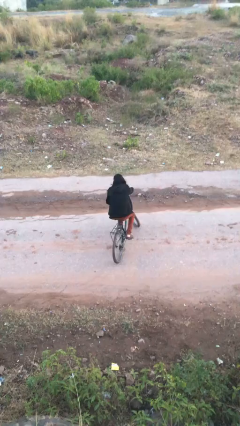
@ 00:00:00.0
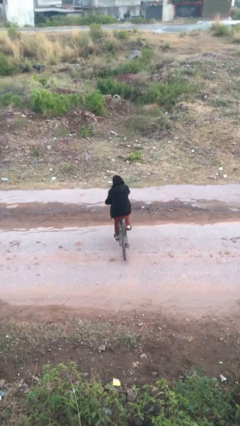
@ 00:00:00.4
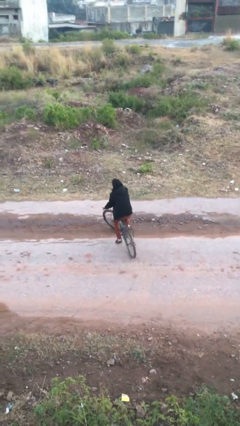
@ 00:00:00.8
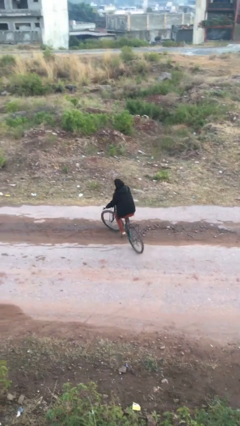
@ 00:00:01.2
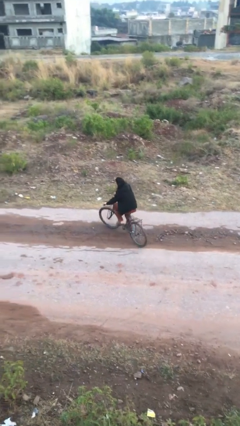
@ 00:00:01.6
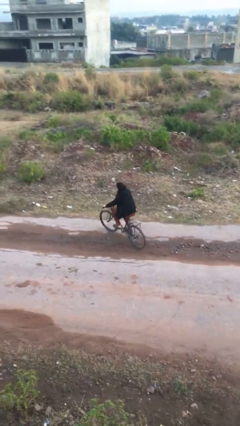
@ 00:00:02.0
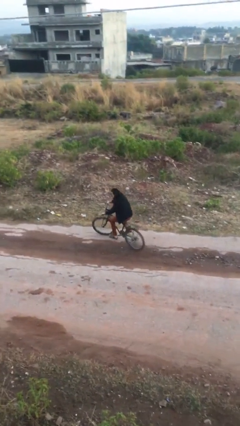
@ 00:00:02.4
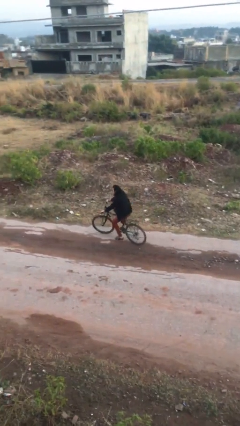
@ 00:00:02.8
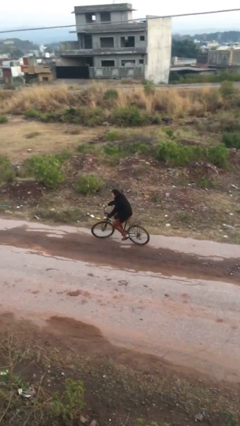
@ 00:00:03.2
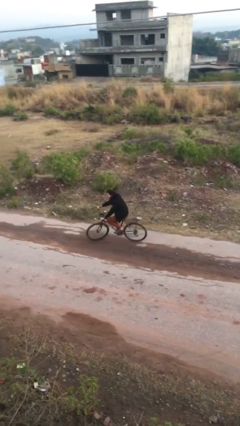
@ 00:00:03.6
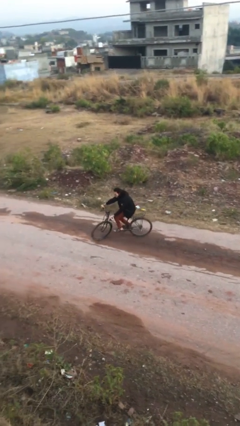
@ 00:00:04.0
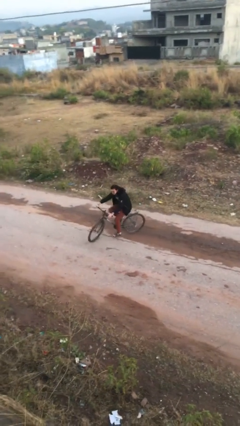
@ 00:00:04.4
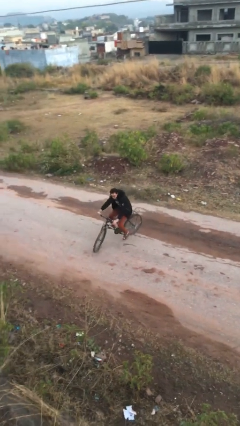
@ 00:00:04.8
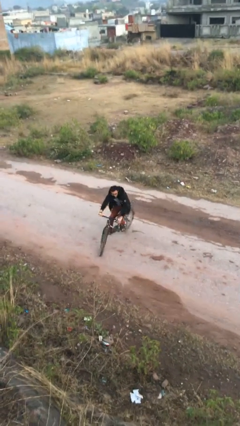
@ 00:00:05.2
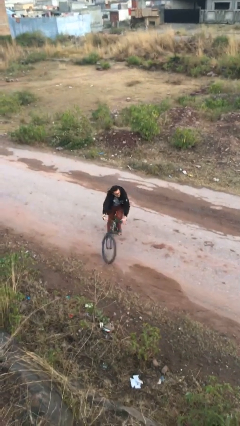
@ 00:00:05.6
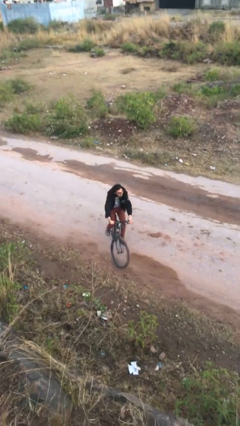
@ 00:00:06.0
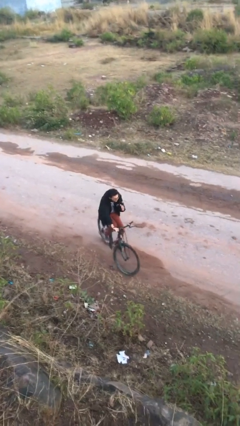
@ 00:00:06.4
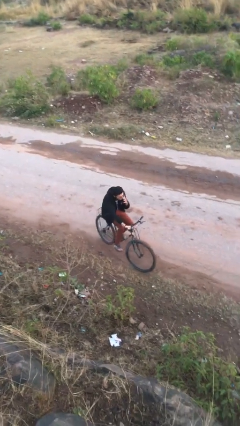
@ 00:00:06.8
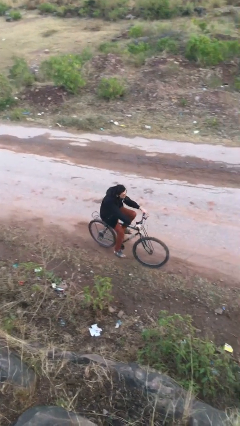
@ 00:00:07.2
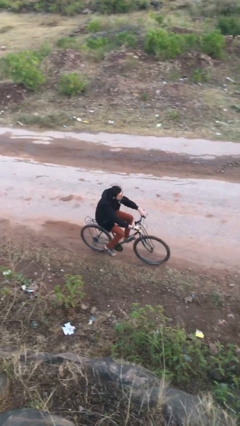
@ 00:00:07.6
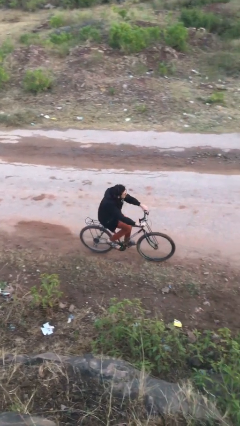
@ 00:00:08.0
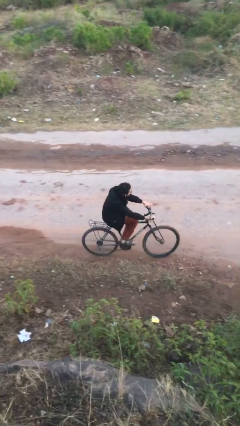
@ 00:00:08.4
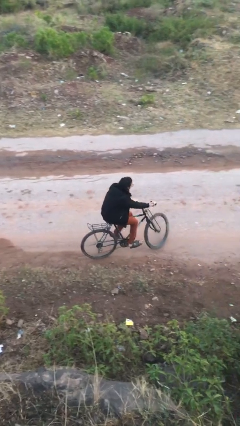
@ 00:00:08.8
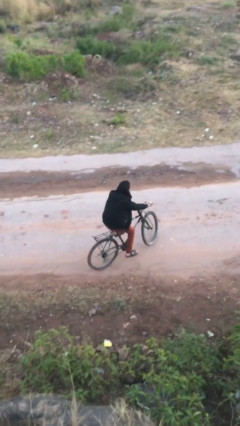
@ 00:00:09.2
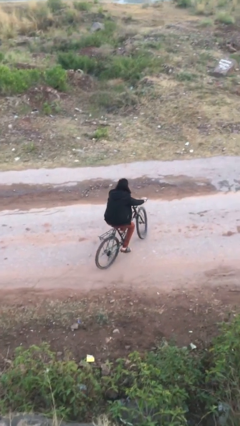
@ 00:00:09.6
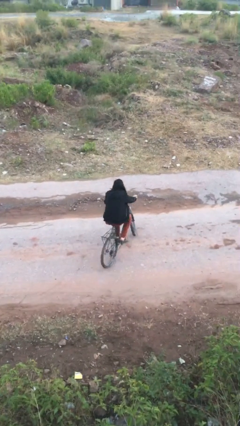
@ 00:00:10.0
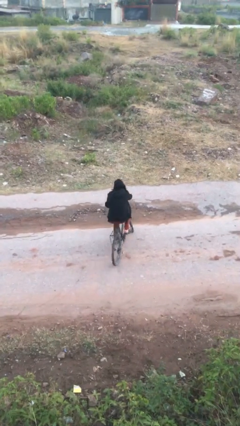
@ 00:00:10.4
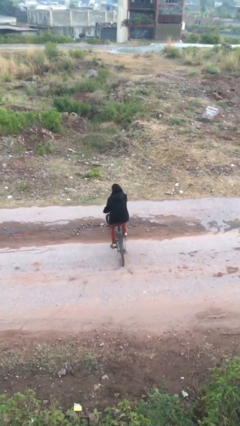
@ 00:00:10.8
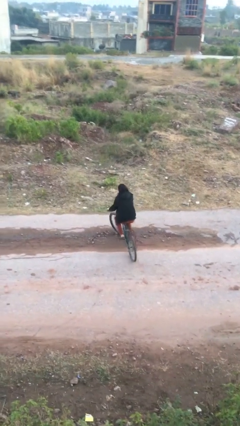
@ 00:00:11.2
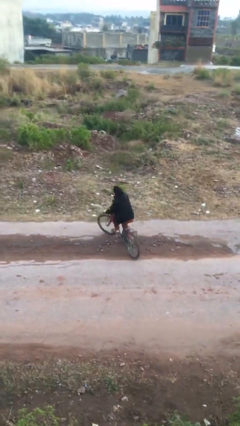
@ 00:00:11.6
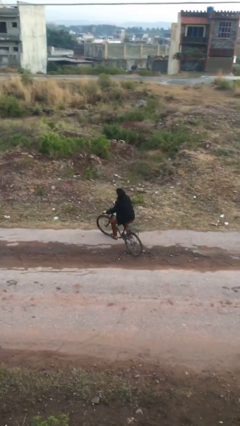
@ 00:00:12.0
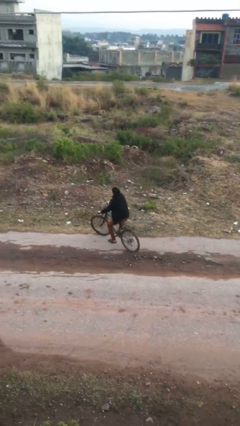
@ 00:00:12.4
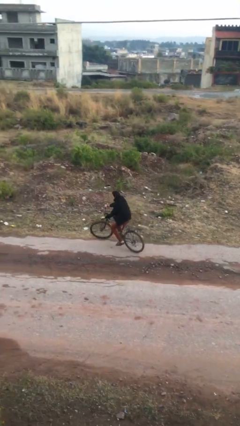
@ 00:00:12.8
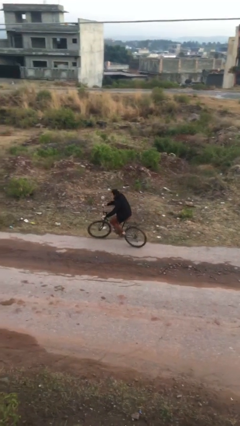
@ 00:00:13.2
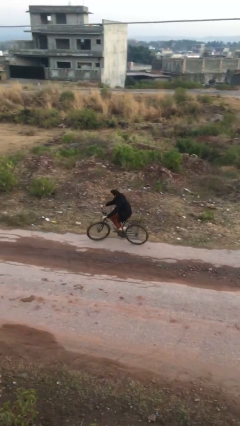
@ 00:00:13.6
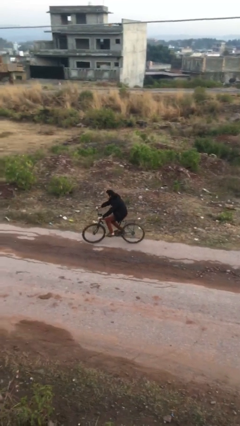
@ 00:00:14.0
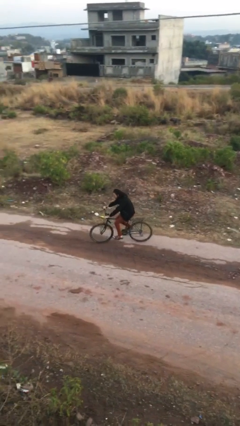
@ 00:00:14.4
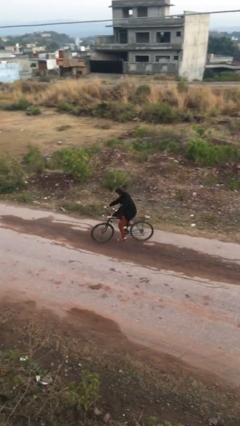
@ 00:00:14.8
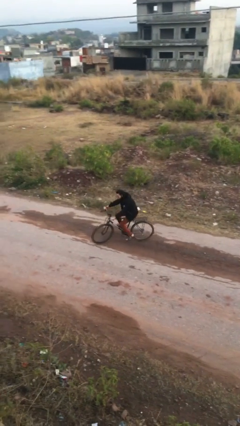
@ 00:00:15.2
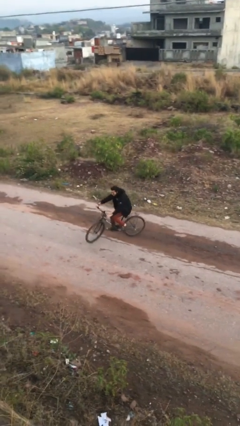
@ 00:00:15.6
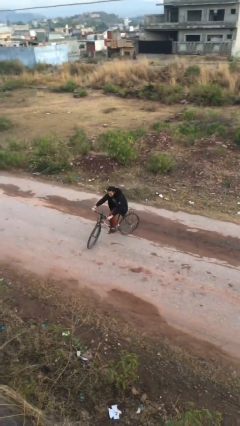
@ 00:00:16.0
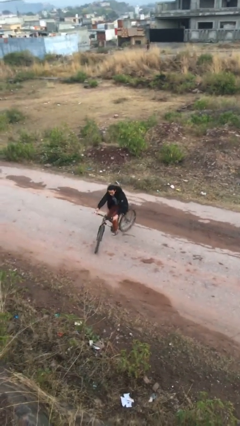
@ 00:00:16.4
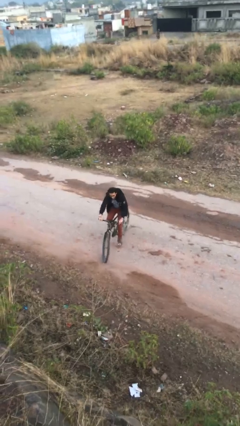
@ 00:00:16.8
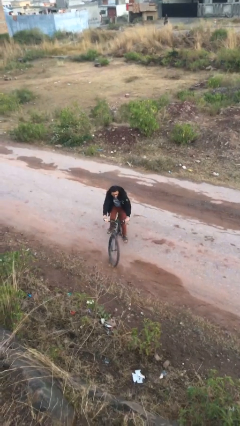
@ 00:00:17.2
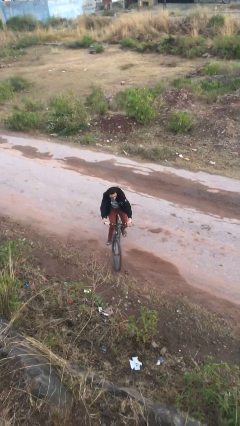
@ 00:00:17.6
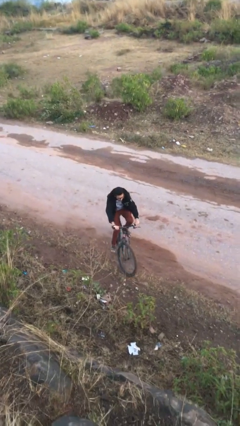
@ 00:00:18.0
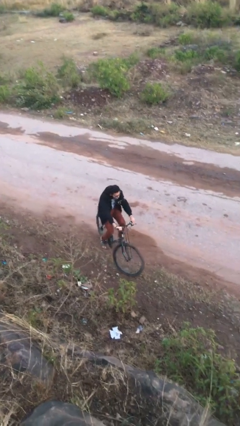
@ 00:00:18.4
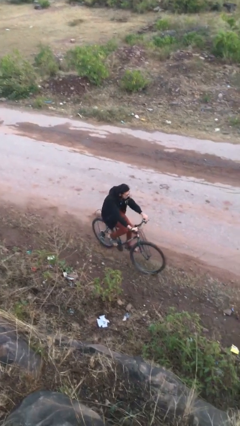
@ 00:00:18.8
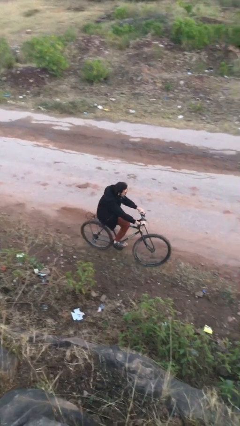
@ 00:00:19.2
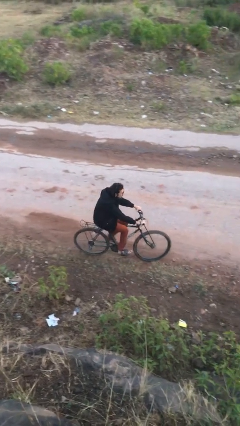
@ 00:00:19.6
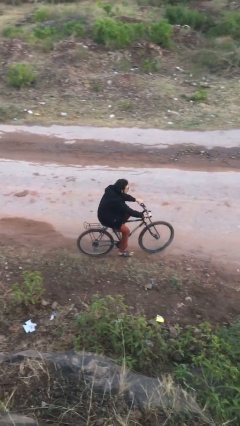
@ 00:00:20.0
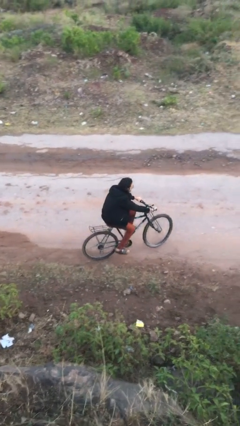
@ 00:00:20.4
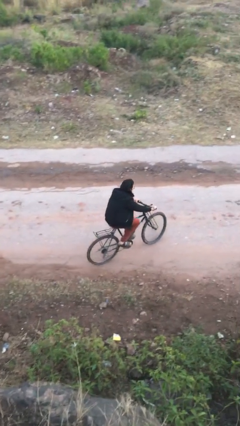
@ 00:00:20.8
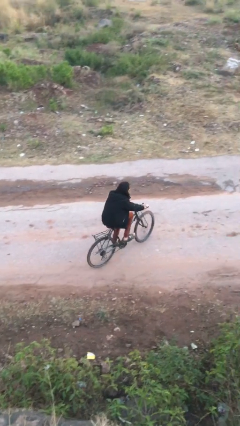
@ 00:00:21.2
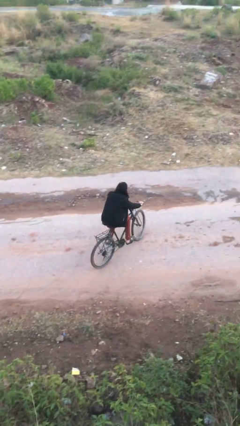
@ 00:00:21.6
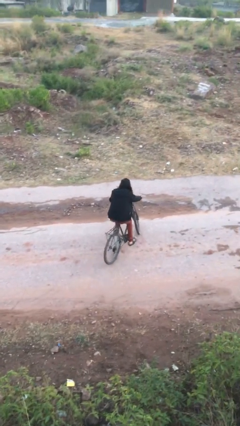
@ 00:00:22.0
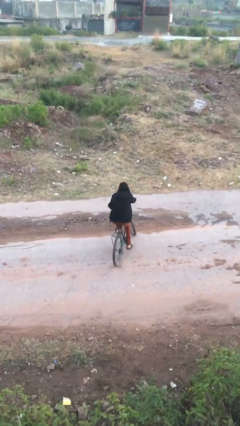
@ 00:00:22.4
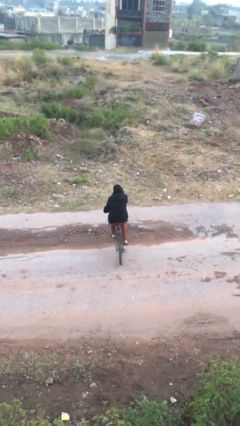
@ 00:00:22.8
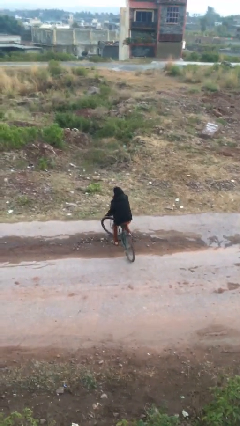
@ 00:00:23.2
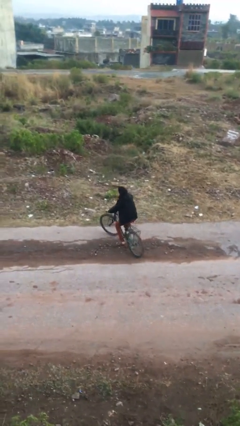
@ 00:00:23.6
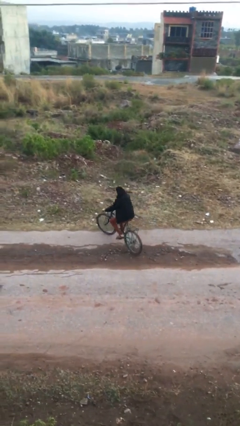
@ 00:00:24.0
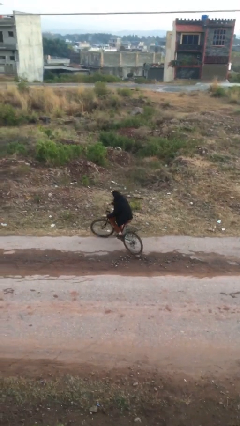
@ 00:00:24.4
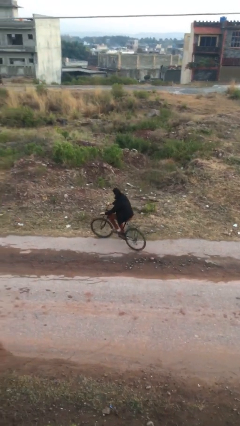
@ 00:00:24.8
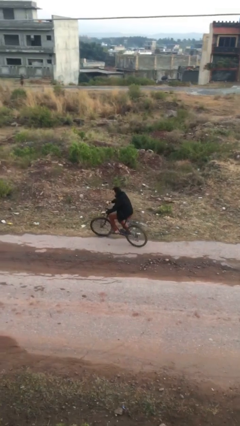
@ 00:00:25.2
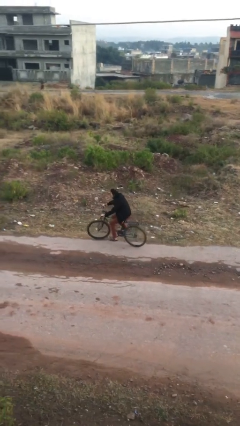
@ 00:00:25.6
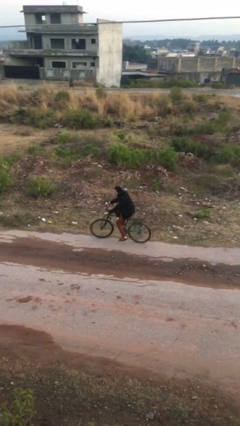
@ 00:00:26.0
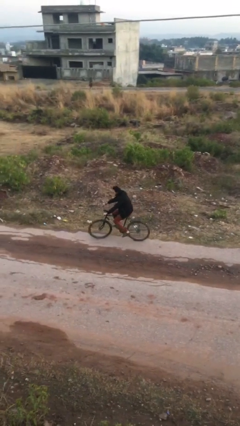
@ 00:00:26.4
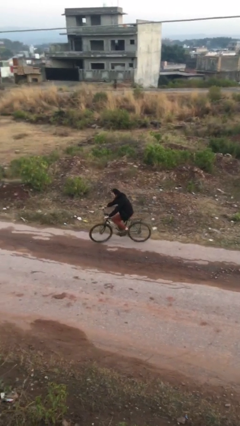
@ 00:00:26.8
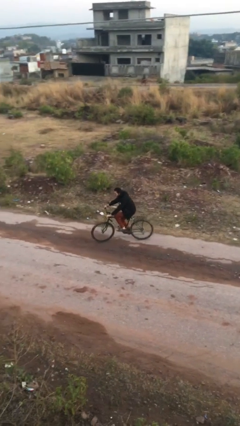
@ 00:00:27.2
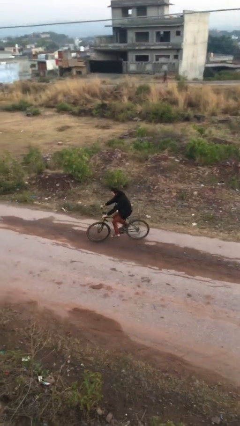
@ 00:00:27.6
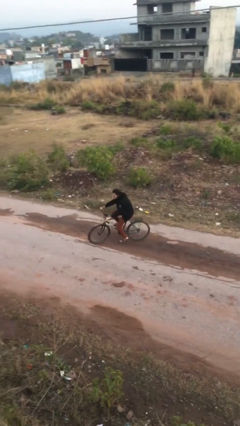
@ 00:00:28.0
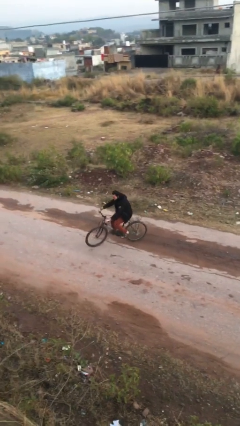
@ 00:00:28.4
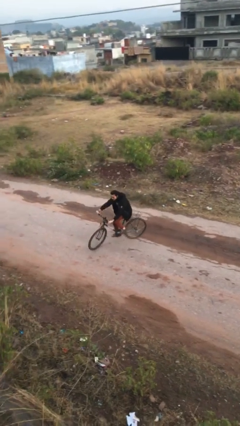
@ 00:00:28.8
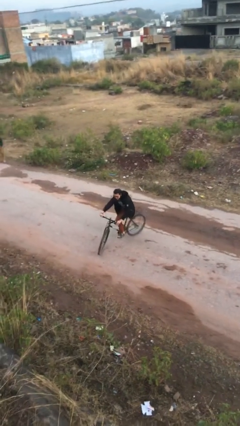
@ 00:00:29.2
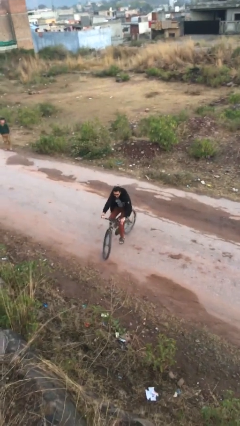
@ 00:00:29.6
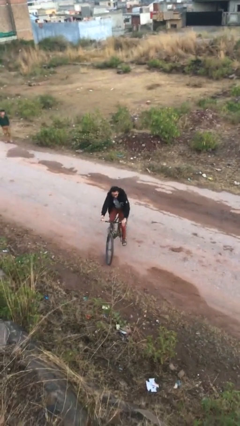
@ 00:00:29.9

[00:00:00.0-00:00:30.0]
person rides bicycle

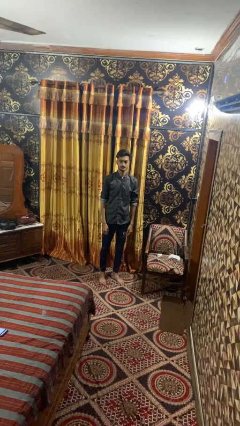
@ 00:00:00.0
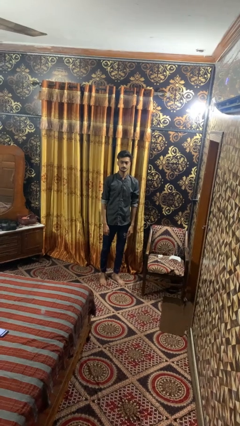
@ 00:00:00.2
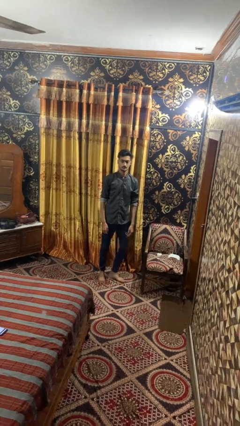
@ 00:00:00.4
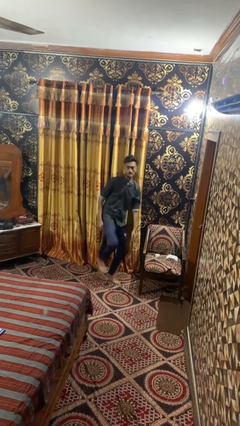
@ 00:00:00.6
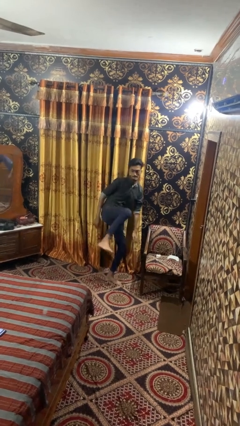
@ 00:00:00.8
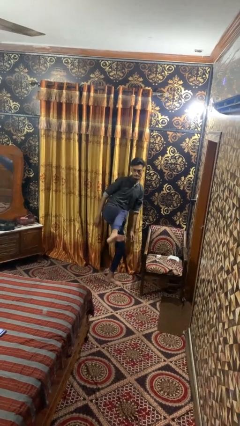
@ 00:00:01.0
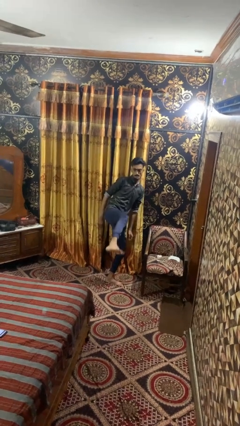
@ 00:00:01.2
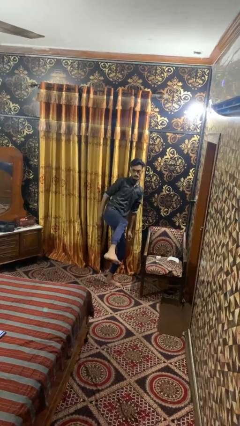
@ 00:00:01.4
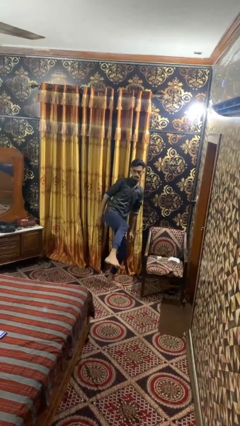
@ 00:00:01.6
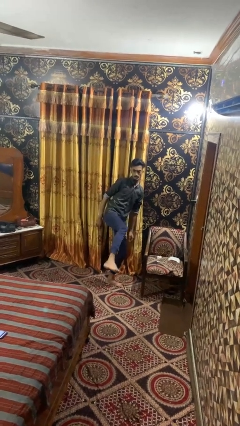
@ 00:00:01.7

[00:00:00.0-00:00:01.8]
person karate kicks

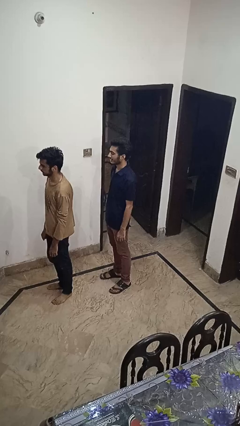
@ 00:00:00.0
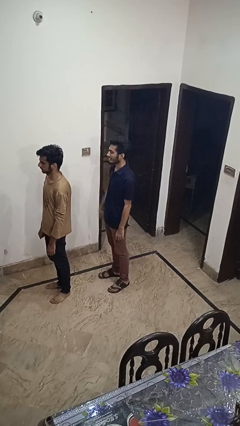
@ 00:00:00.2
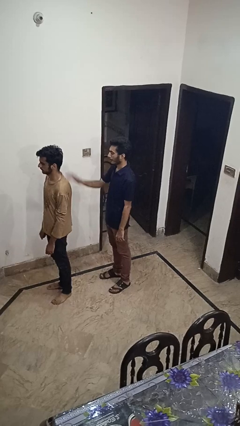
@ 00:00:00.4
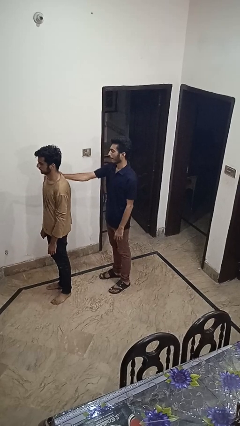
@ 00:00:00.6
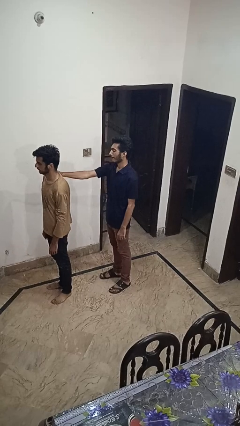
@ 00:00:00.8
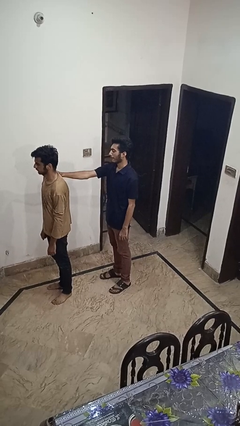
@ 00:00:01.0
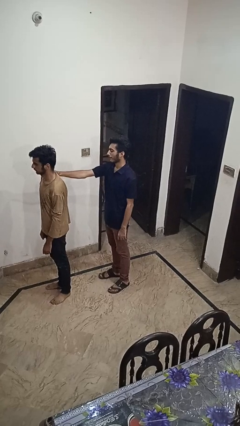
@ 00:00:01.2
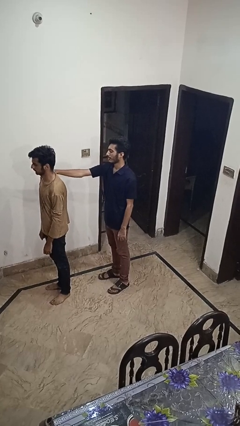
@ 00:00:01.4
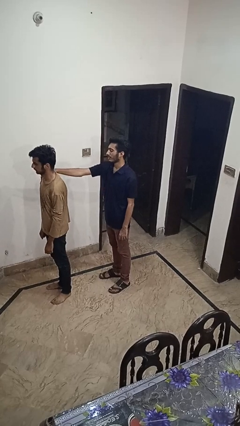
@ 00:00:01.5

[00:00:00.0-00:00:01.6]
person grabs person by shoulder
